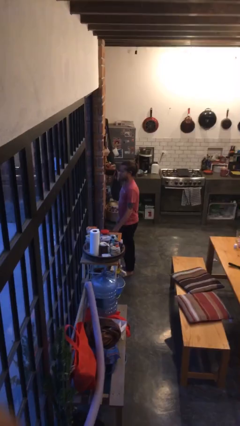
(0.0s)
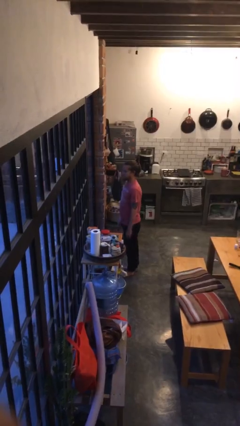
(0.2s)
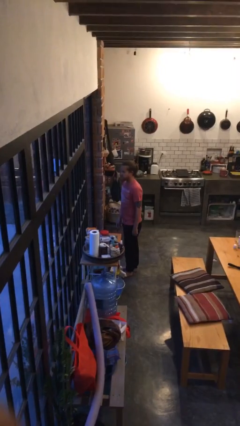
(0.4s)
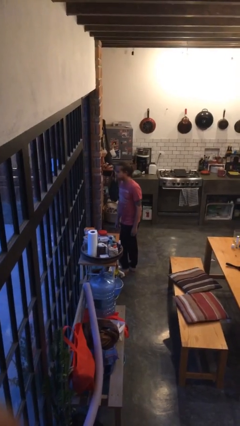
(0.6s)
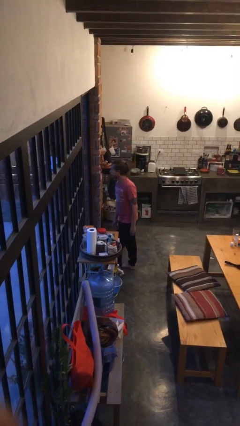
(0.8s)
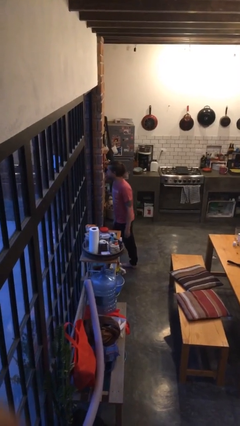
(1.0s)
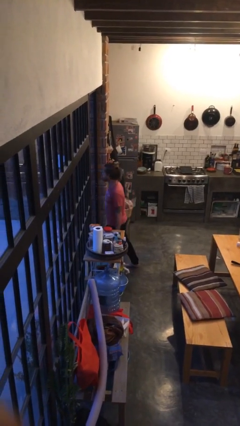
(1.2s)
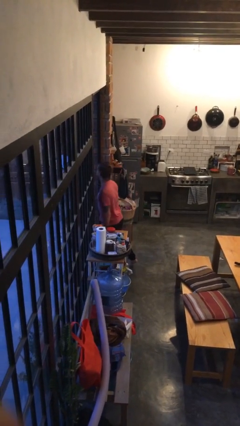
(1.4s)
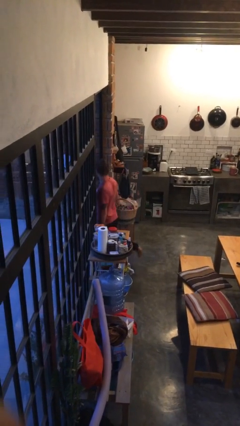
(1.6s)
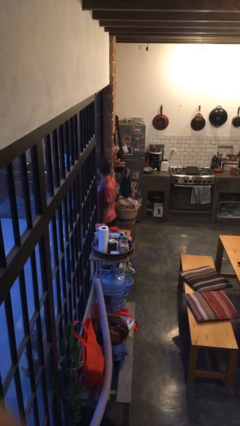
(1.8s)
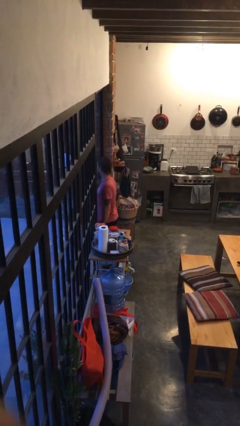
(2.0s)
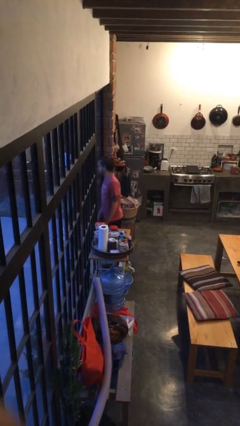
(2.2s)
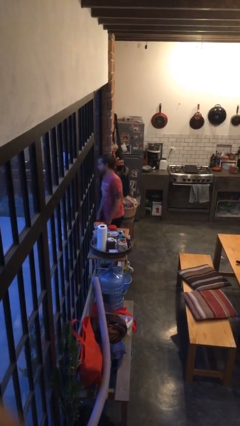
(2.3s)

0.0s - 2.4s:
person bumps into wall

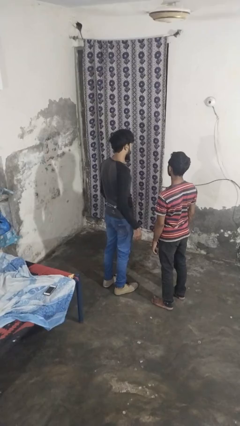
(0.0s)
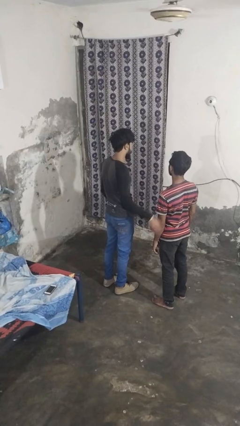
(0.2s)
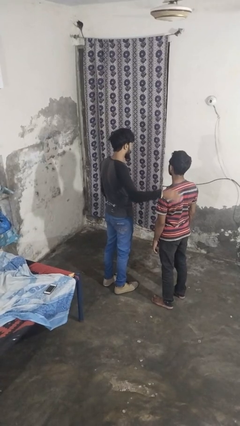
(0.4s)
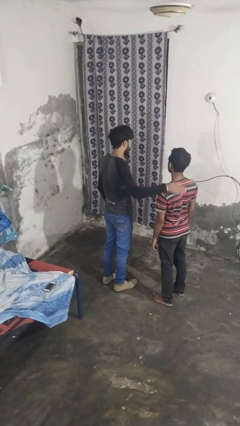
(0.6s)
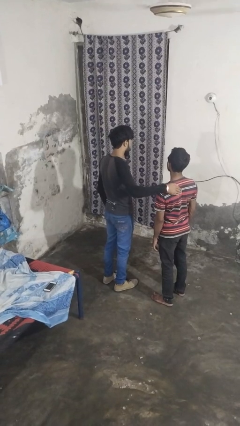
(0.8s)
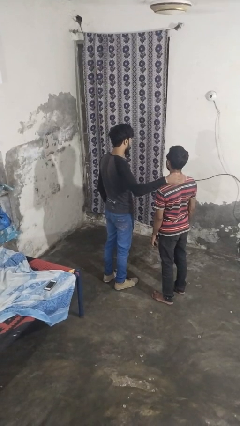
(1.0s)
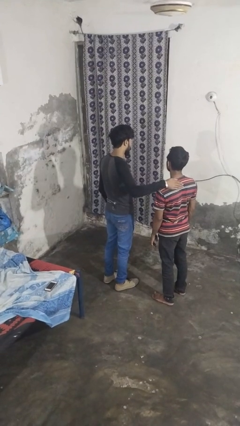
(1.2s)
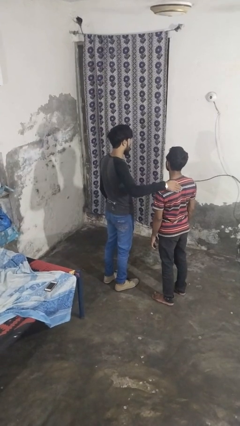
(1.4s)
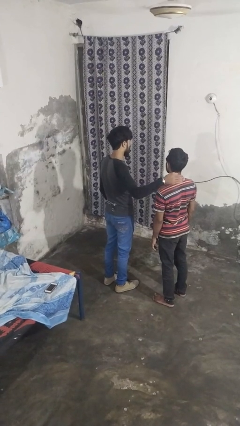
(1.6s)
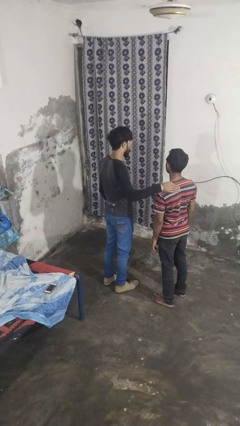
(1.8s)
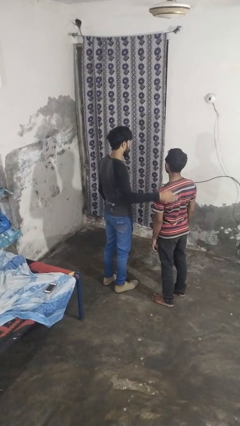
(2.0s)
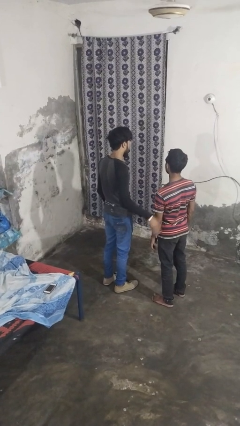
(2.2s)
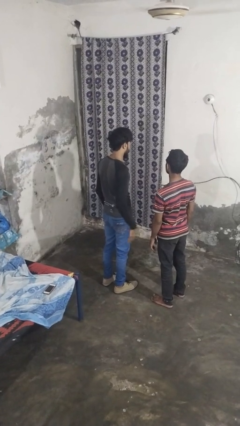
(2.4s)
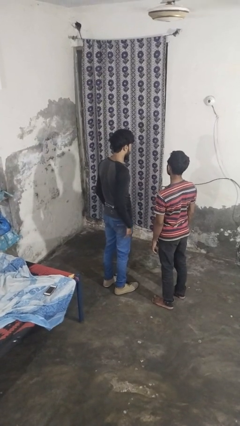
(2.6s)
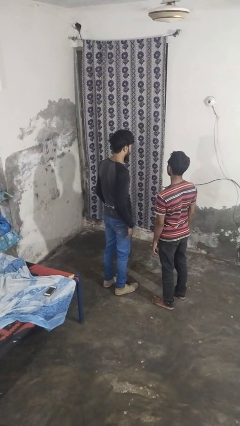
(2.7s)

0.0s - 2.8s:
person pounds shoulders of person

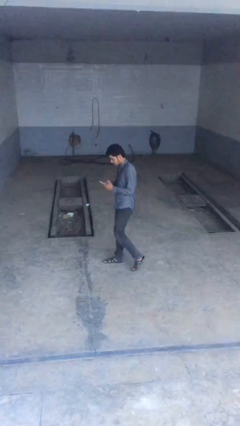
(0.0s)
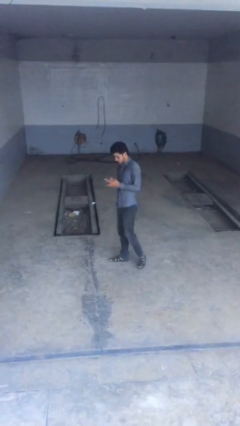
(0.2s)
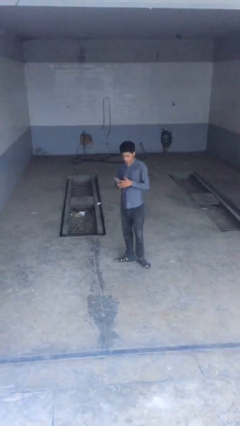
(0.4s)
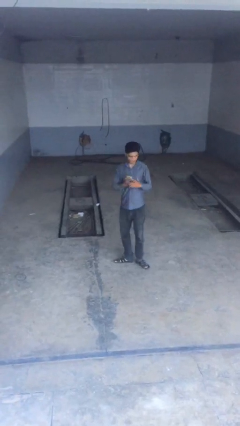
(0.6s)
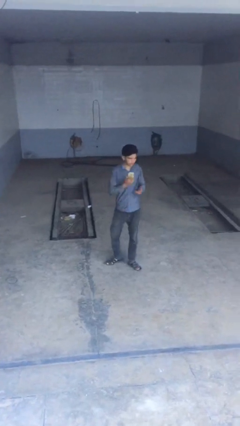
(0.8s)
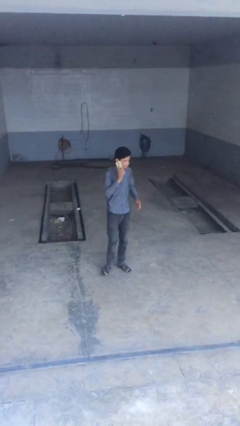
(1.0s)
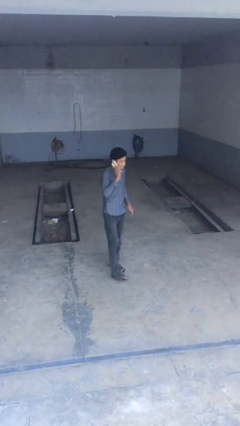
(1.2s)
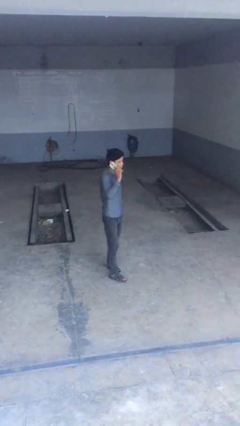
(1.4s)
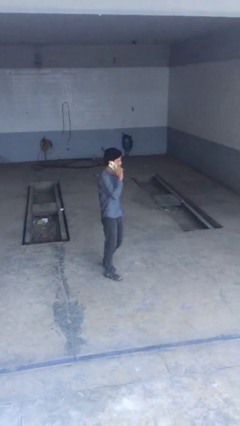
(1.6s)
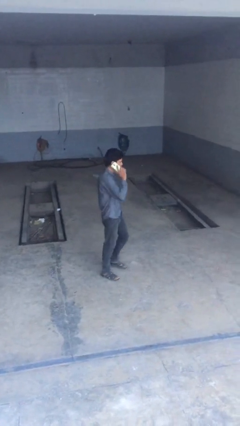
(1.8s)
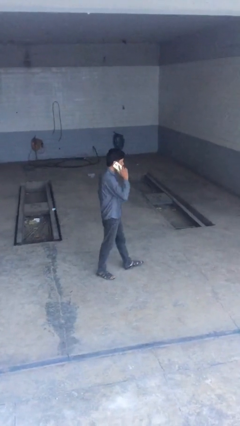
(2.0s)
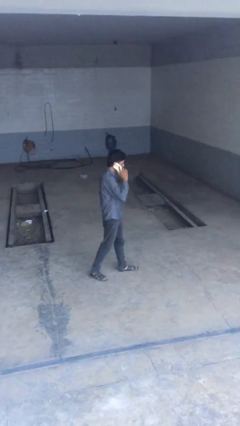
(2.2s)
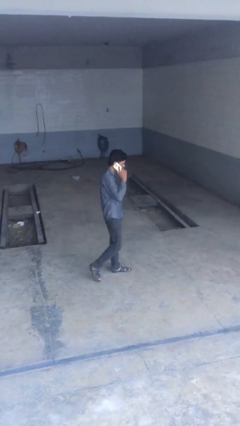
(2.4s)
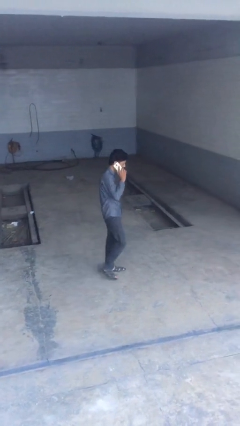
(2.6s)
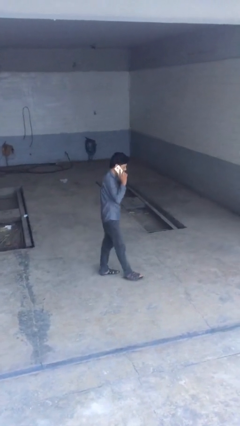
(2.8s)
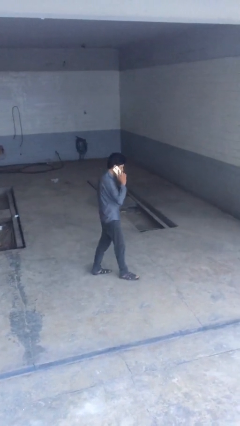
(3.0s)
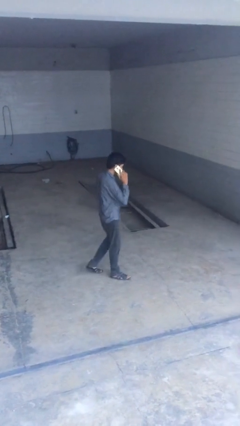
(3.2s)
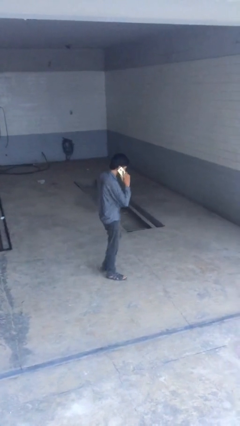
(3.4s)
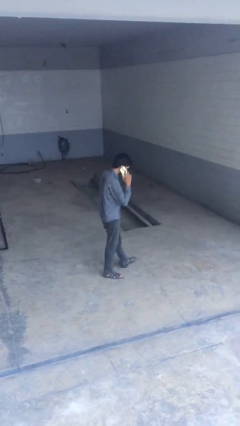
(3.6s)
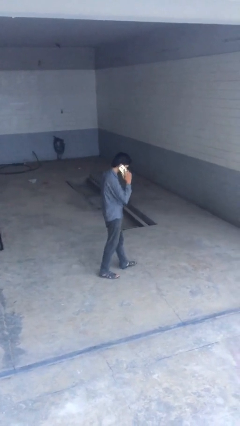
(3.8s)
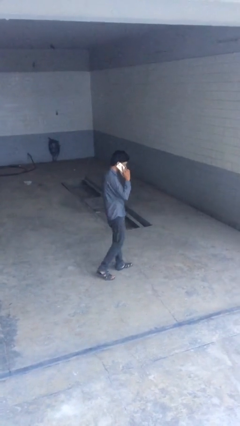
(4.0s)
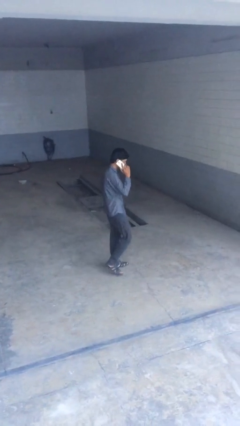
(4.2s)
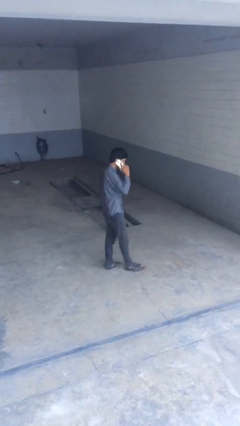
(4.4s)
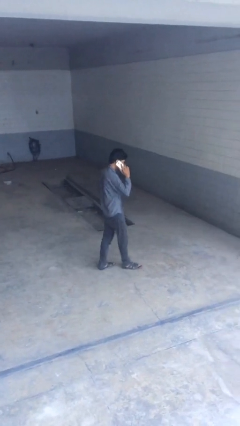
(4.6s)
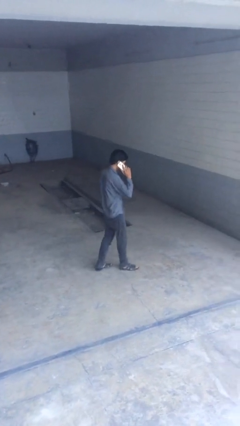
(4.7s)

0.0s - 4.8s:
person talks on phone

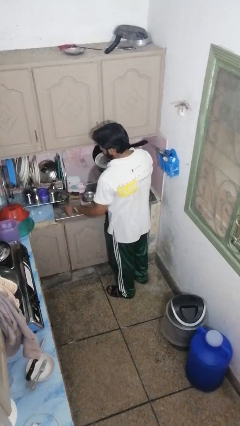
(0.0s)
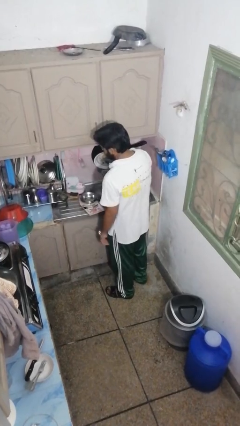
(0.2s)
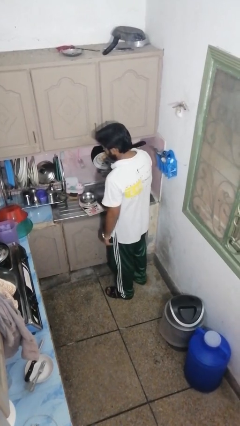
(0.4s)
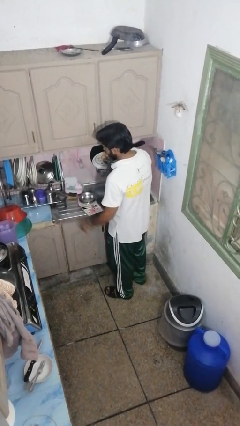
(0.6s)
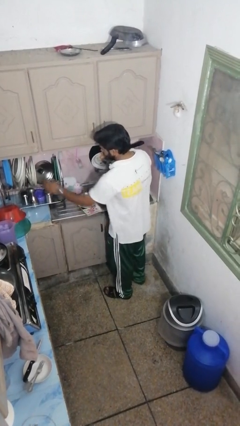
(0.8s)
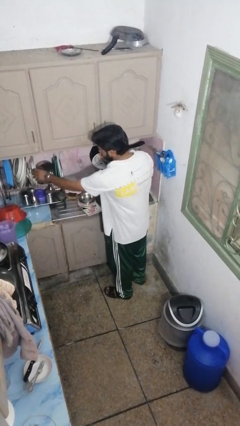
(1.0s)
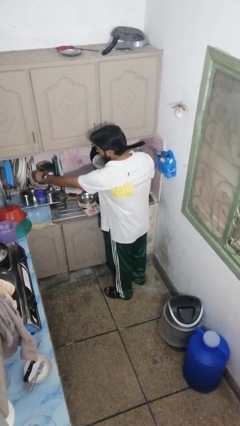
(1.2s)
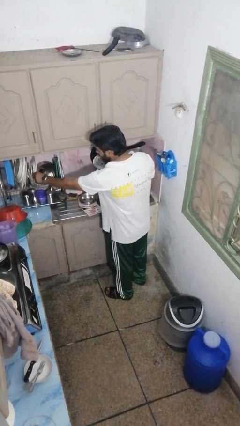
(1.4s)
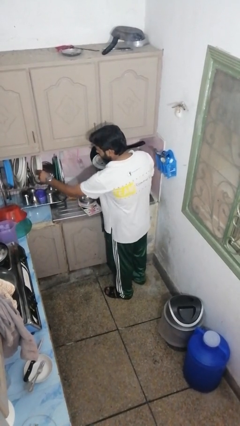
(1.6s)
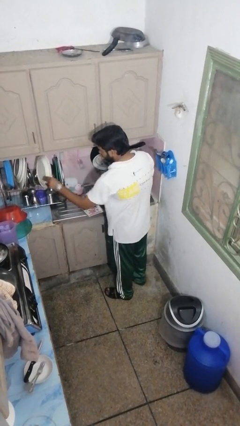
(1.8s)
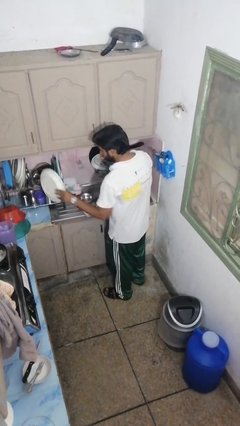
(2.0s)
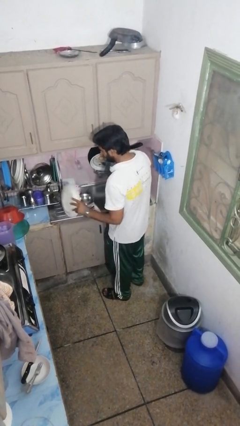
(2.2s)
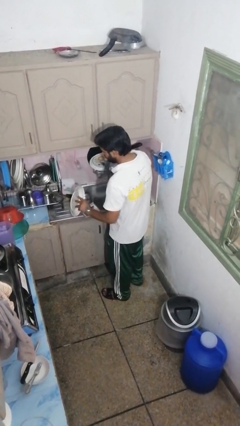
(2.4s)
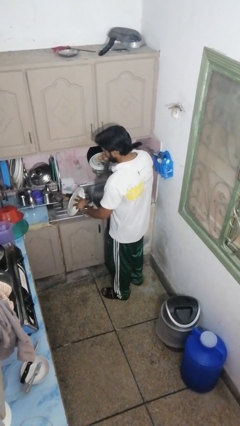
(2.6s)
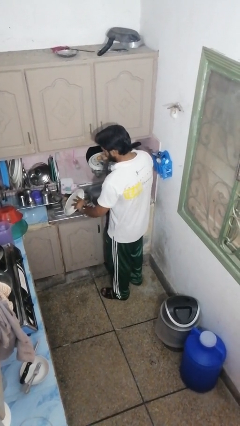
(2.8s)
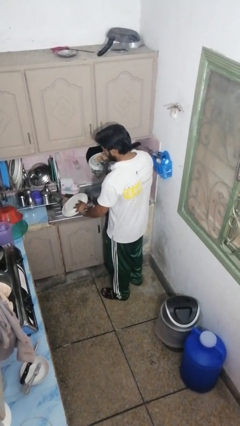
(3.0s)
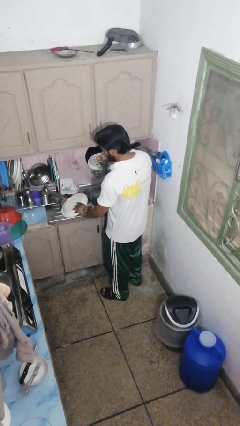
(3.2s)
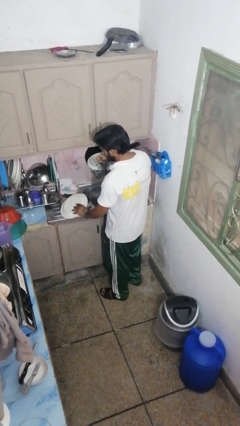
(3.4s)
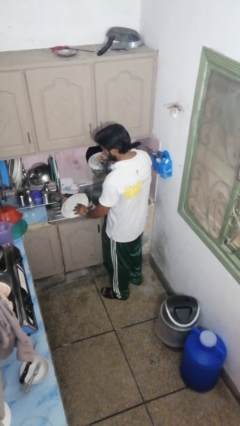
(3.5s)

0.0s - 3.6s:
person unloads dishwasher

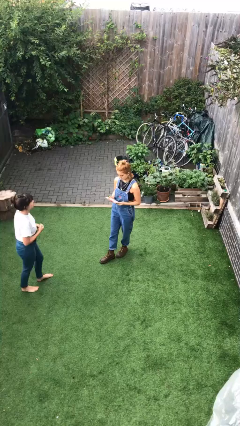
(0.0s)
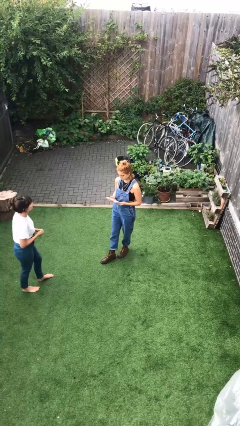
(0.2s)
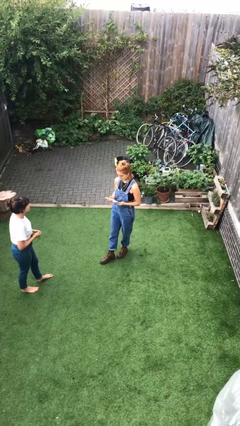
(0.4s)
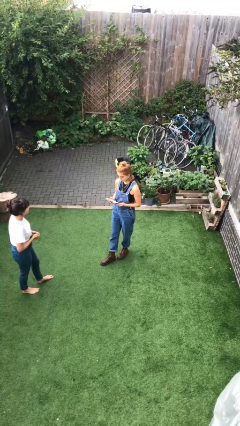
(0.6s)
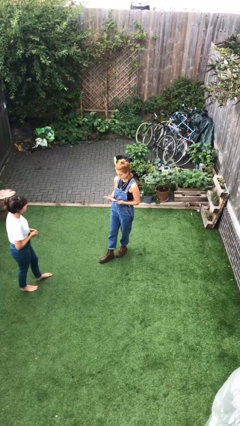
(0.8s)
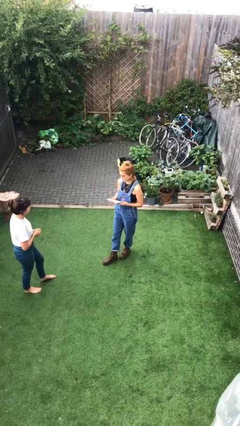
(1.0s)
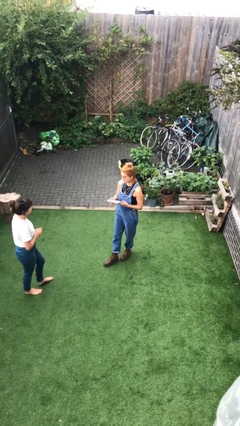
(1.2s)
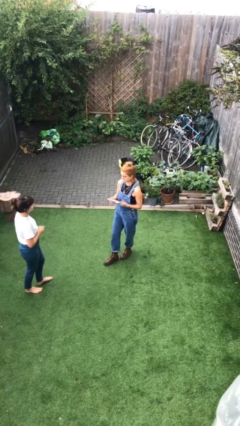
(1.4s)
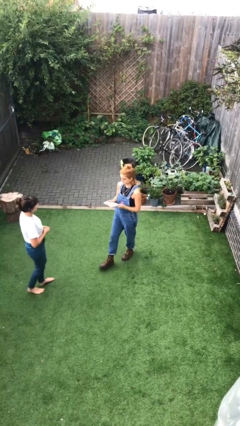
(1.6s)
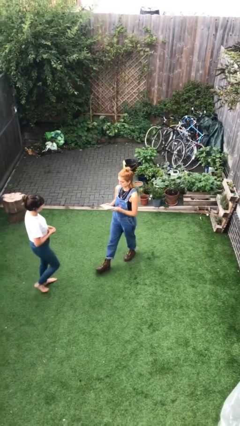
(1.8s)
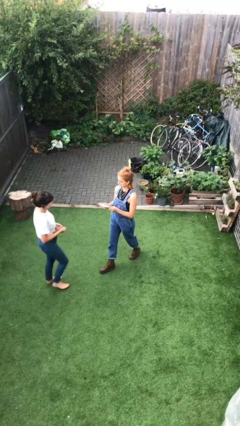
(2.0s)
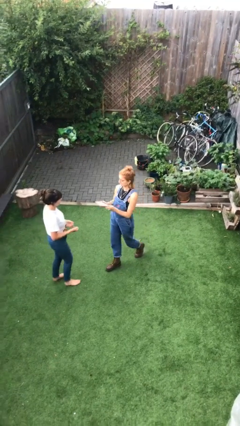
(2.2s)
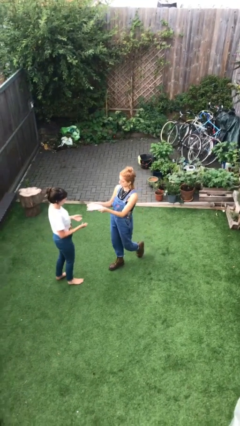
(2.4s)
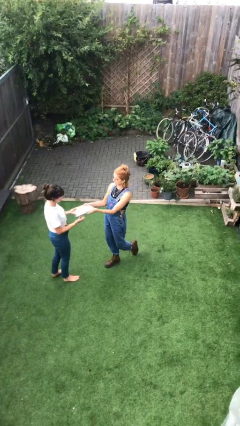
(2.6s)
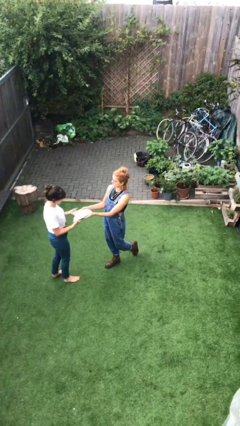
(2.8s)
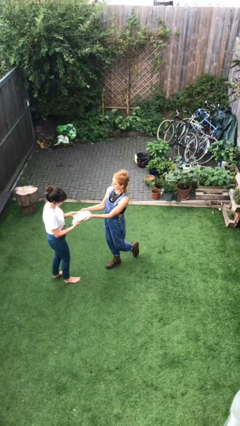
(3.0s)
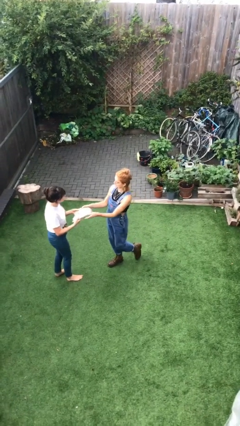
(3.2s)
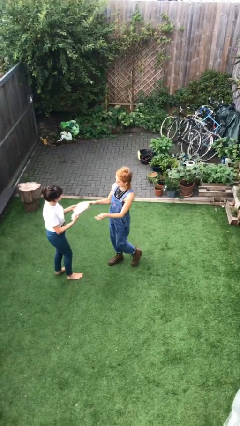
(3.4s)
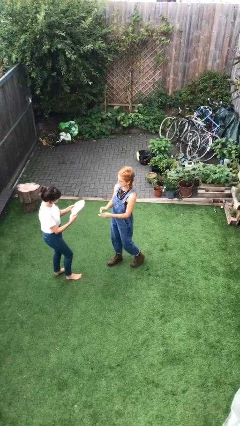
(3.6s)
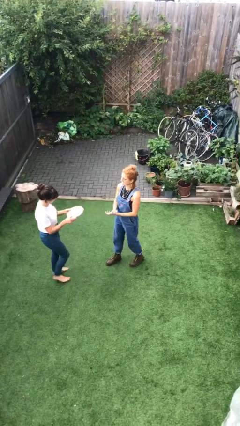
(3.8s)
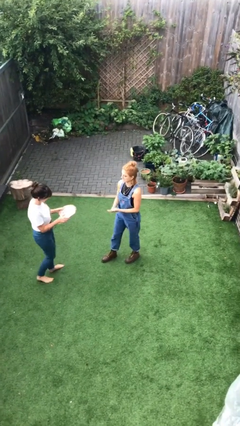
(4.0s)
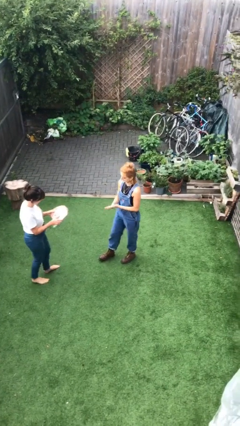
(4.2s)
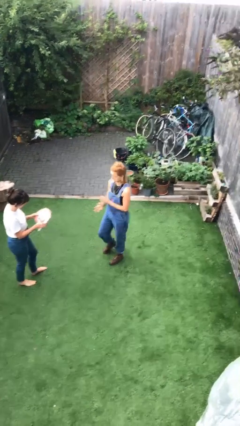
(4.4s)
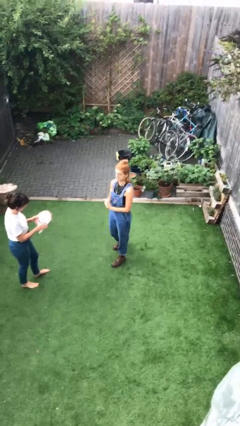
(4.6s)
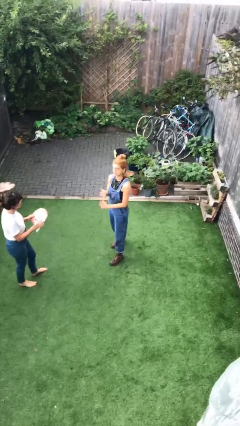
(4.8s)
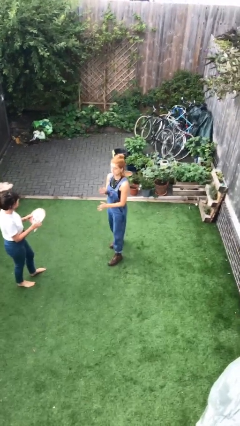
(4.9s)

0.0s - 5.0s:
person transfers object to person
